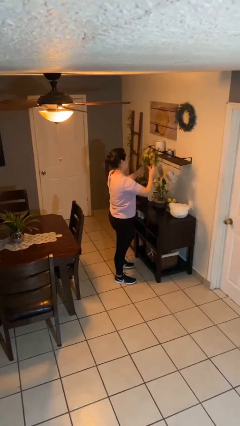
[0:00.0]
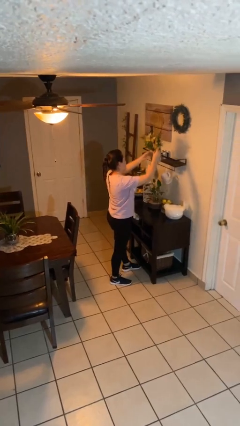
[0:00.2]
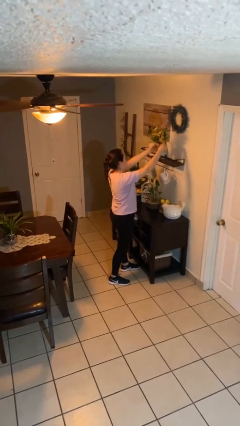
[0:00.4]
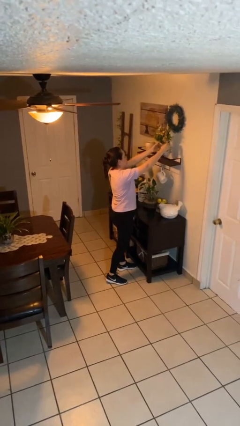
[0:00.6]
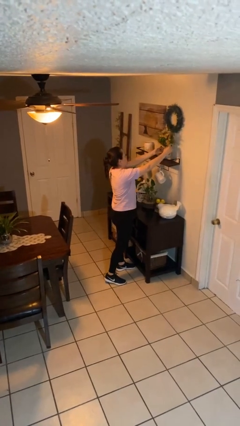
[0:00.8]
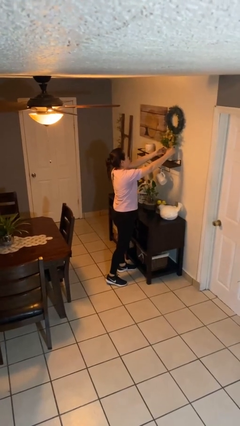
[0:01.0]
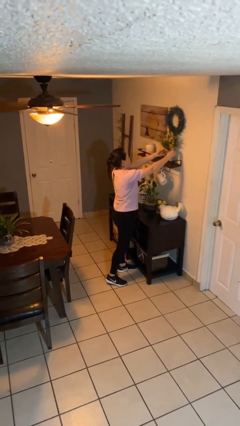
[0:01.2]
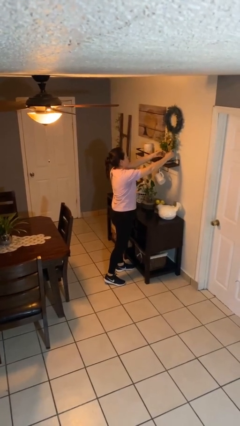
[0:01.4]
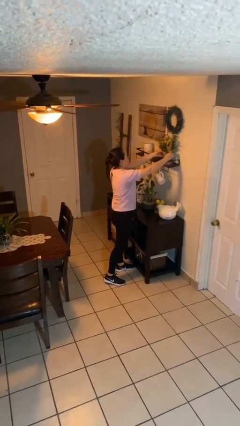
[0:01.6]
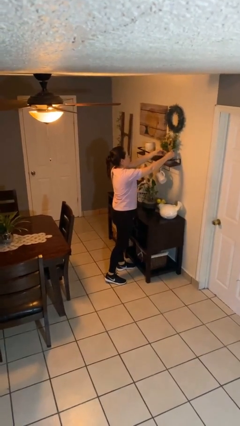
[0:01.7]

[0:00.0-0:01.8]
person puts down object on countertop

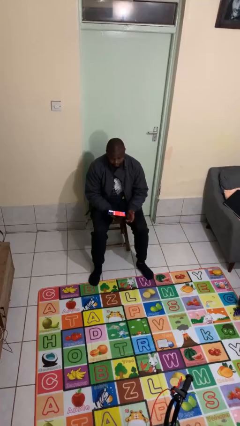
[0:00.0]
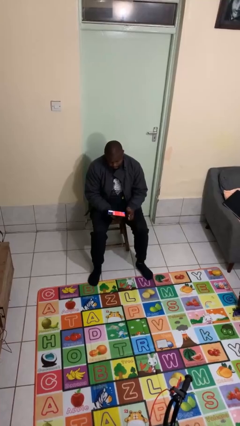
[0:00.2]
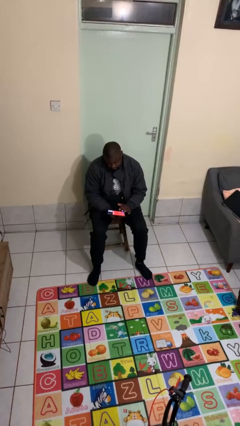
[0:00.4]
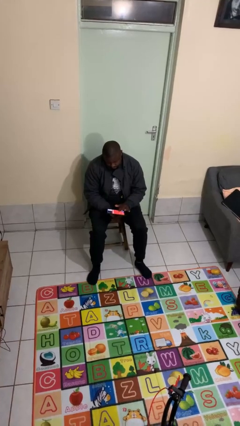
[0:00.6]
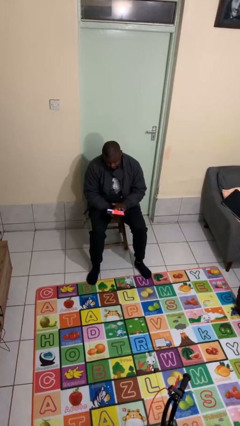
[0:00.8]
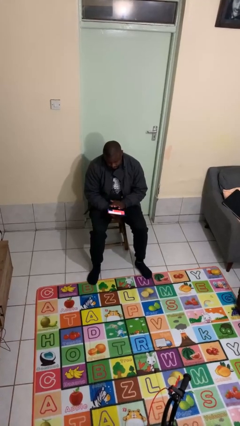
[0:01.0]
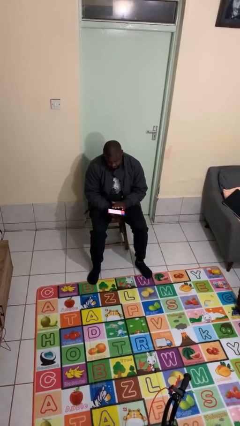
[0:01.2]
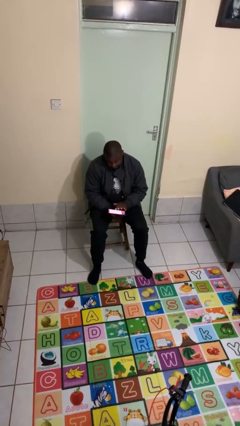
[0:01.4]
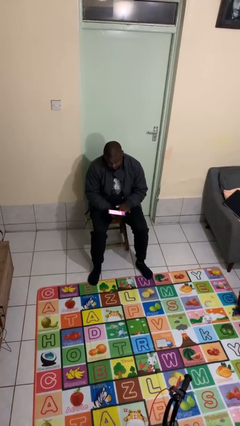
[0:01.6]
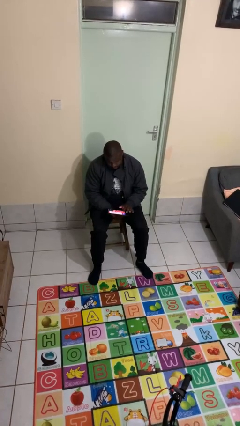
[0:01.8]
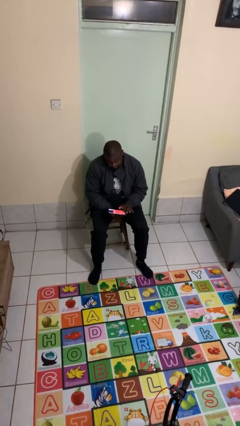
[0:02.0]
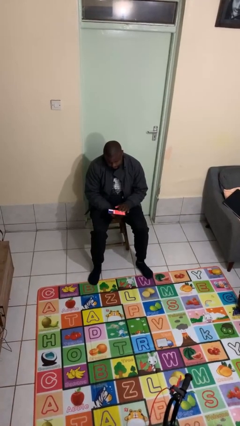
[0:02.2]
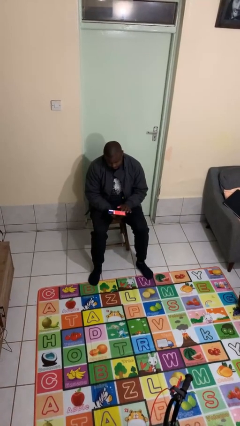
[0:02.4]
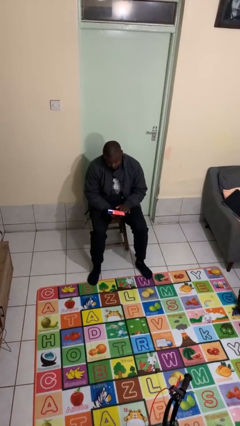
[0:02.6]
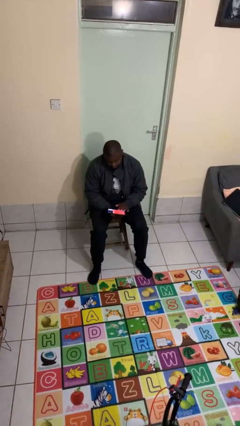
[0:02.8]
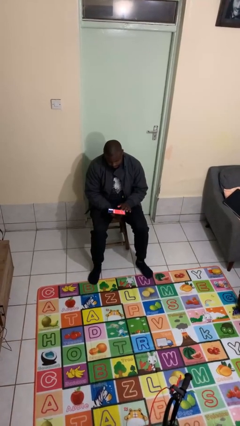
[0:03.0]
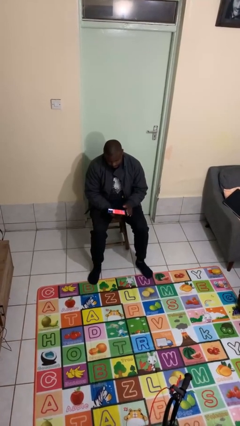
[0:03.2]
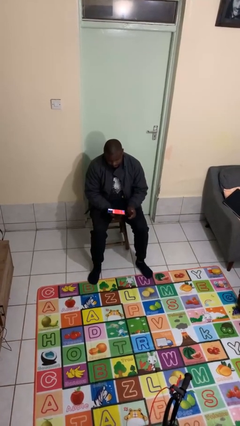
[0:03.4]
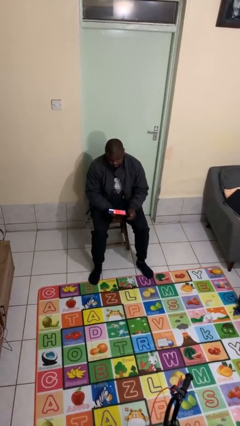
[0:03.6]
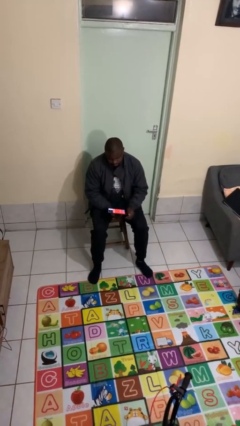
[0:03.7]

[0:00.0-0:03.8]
person interacts with tablet

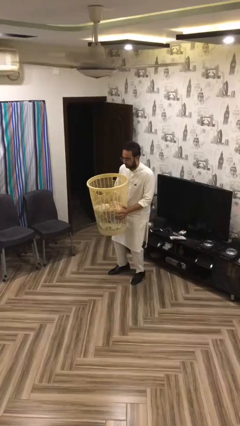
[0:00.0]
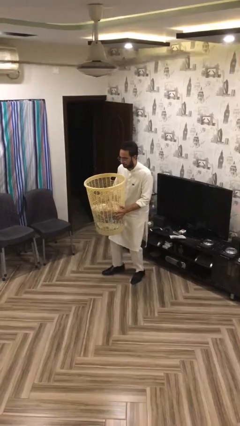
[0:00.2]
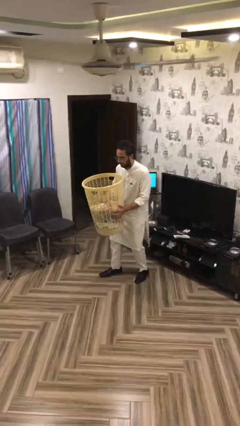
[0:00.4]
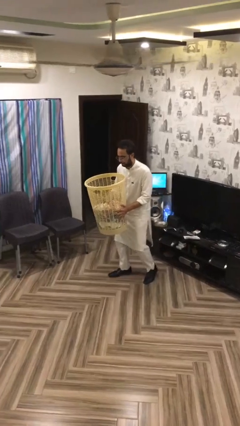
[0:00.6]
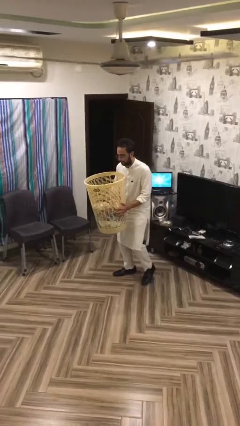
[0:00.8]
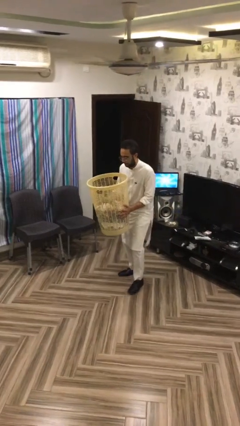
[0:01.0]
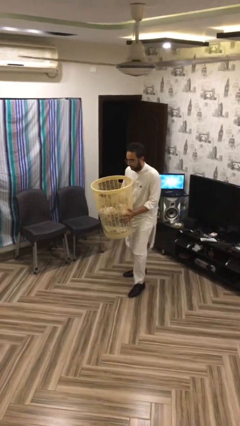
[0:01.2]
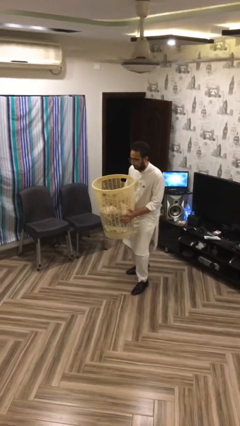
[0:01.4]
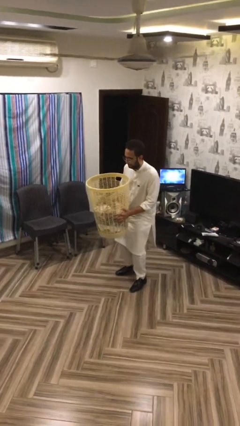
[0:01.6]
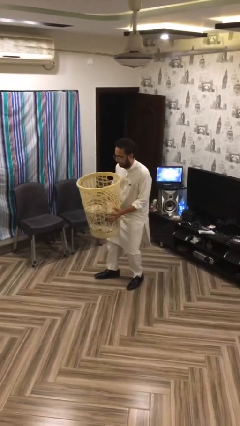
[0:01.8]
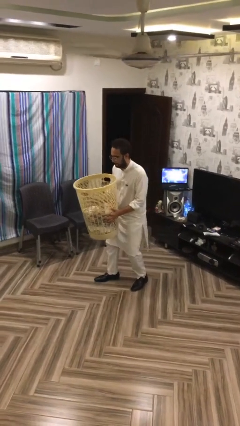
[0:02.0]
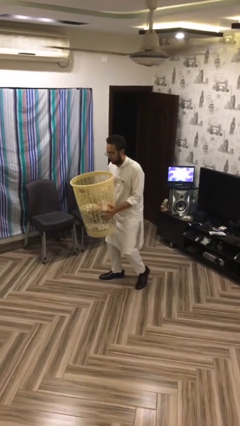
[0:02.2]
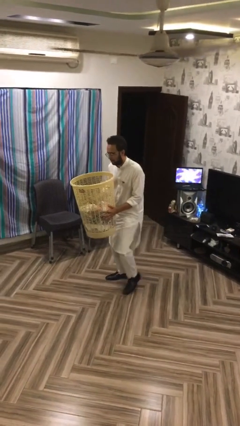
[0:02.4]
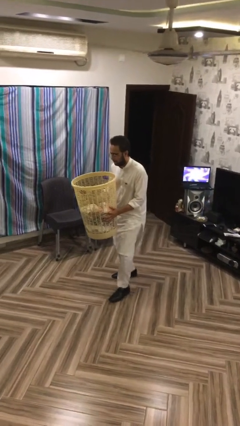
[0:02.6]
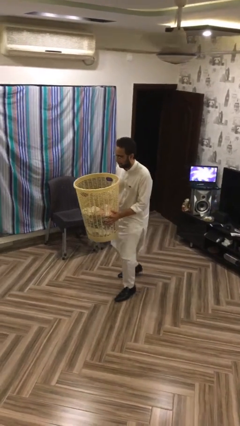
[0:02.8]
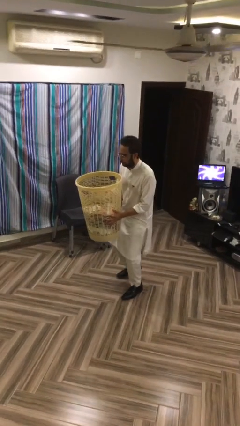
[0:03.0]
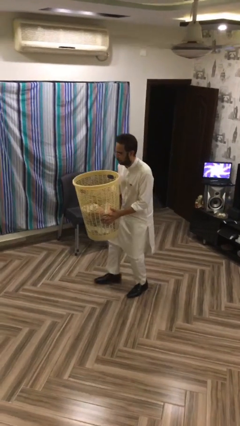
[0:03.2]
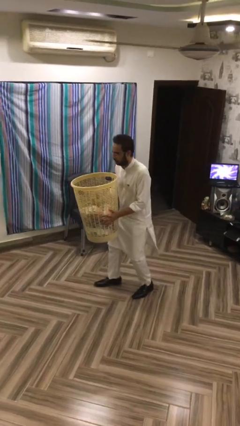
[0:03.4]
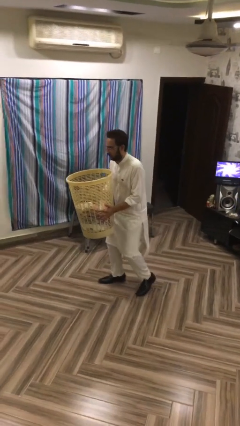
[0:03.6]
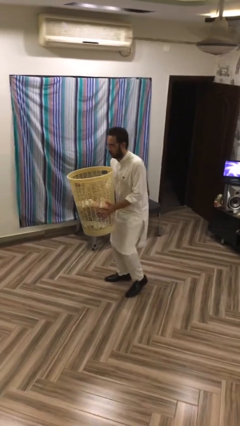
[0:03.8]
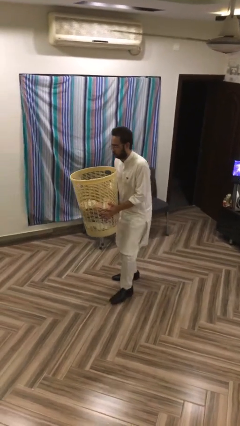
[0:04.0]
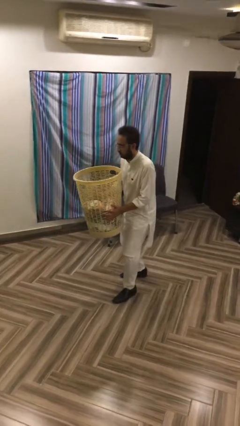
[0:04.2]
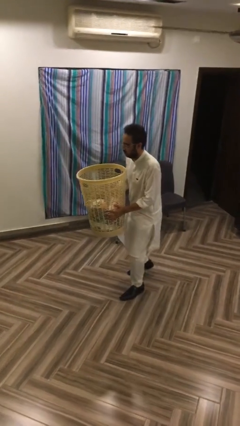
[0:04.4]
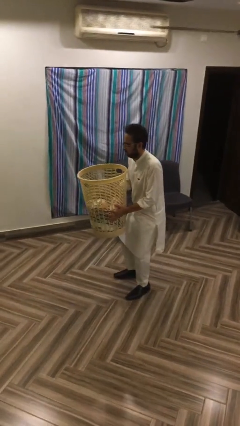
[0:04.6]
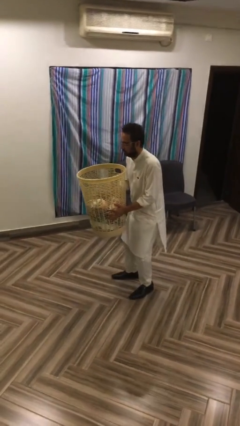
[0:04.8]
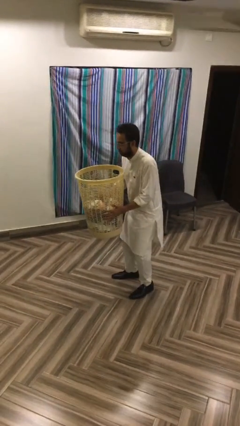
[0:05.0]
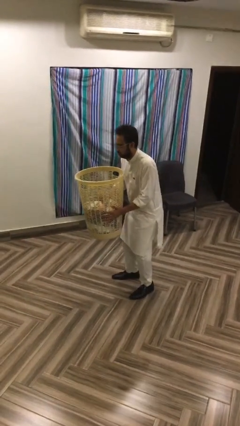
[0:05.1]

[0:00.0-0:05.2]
person carries heavy object

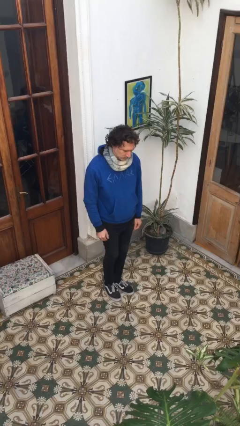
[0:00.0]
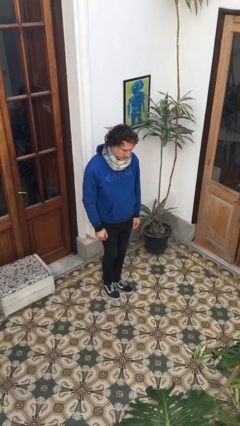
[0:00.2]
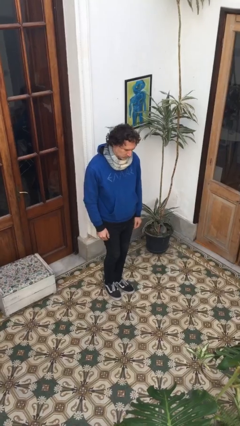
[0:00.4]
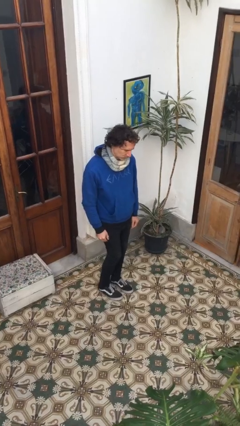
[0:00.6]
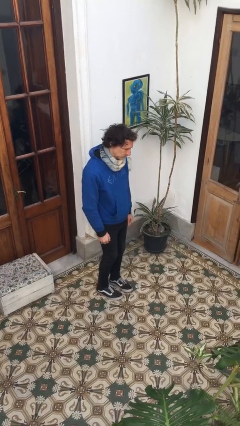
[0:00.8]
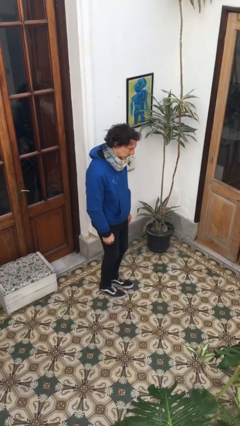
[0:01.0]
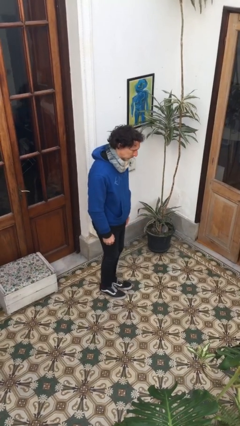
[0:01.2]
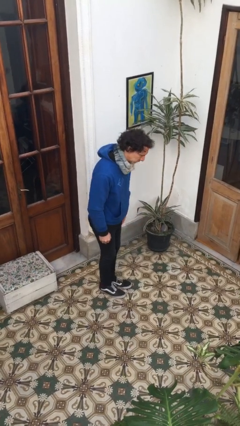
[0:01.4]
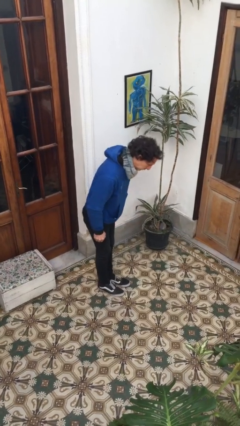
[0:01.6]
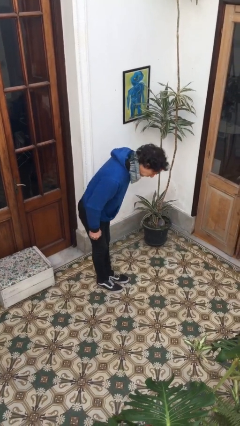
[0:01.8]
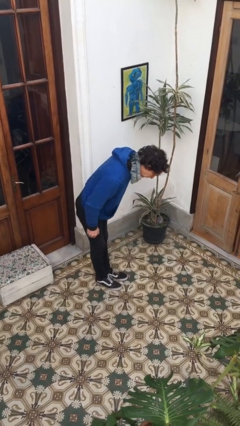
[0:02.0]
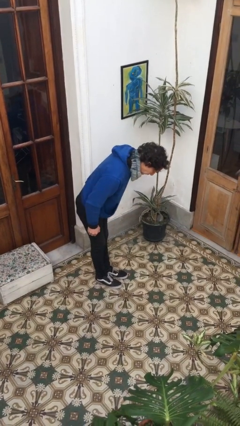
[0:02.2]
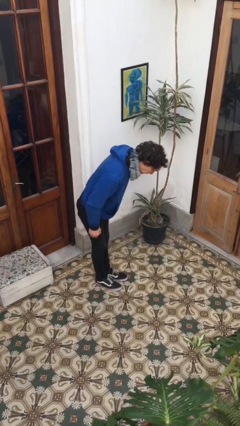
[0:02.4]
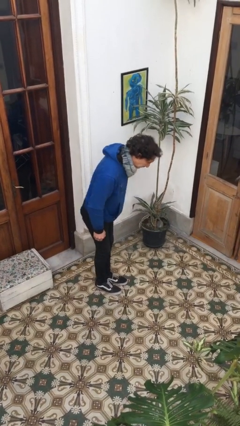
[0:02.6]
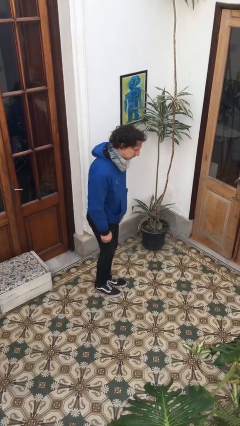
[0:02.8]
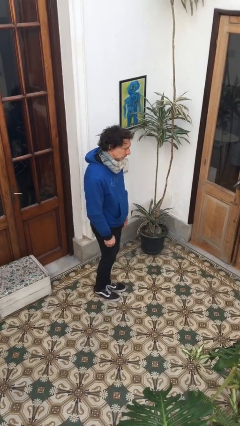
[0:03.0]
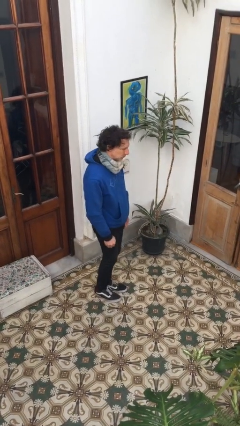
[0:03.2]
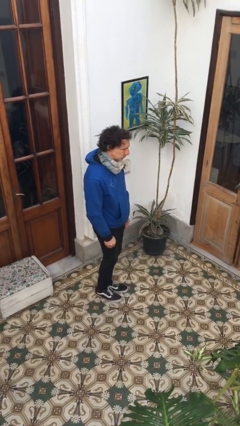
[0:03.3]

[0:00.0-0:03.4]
person bows

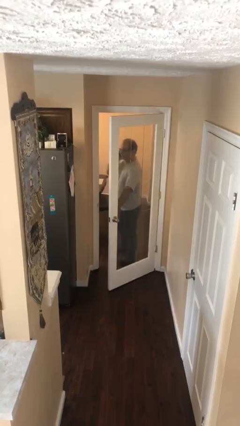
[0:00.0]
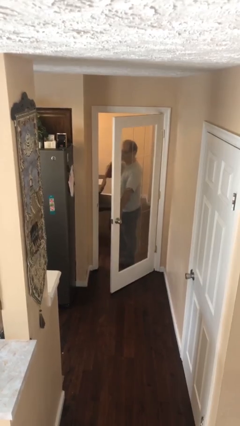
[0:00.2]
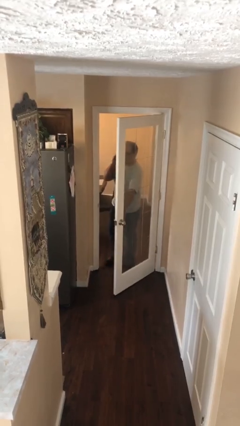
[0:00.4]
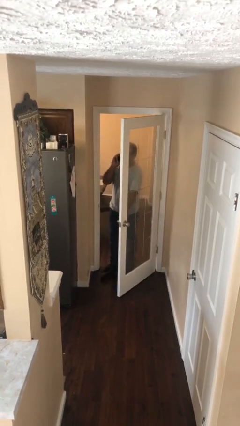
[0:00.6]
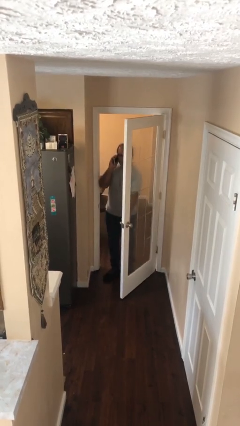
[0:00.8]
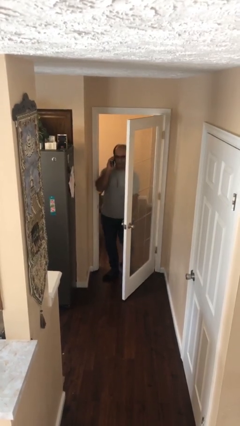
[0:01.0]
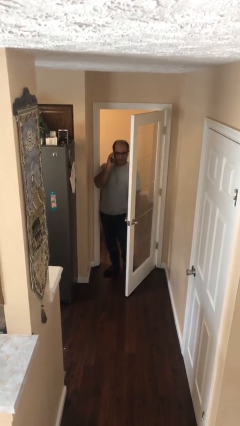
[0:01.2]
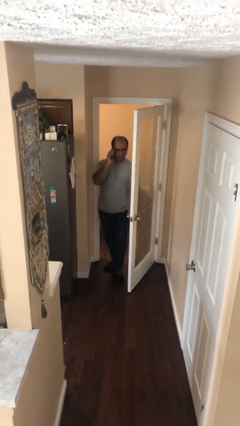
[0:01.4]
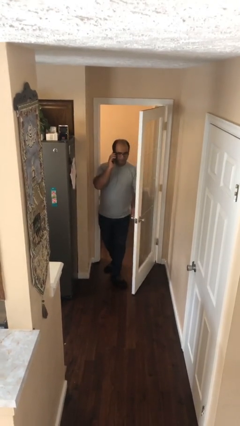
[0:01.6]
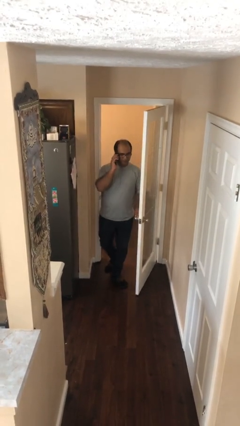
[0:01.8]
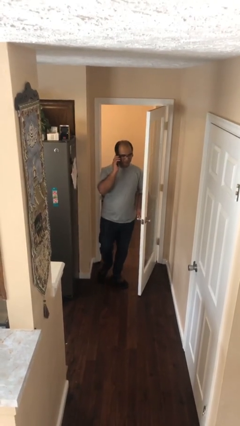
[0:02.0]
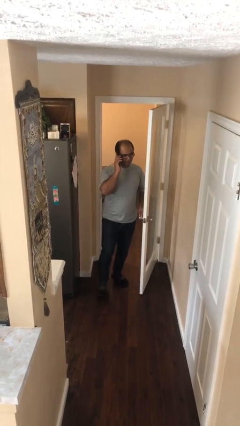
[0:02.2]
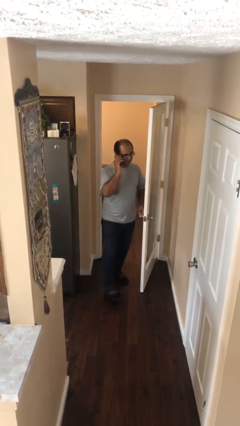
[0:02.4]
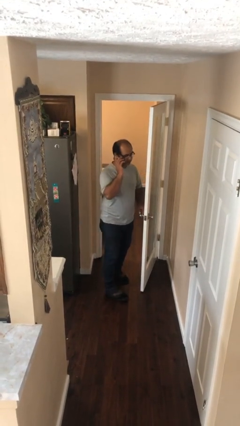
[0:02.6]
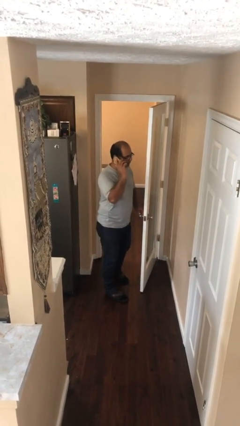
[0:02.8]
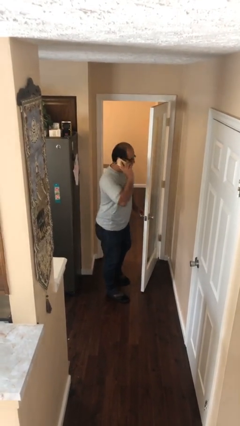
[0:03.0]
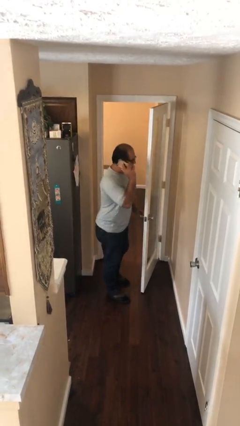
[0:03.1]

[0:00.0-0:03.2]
person enters scene through structure

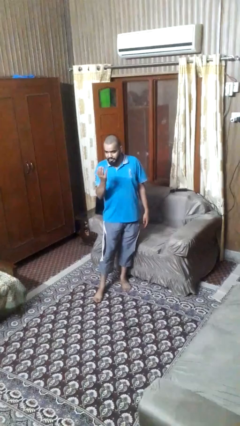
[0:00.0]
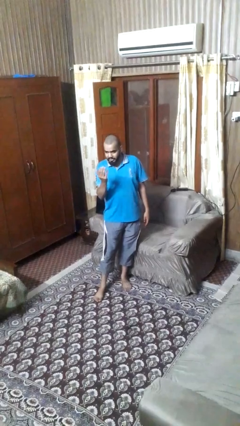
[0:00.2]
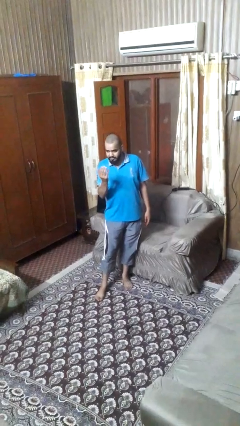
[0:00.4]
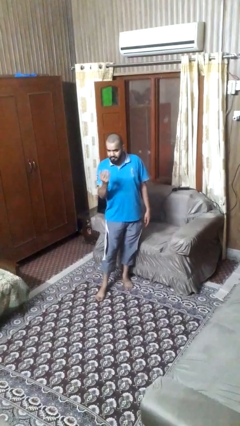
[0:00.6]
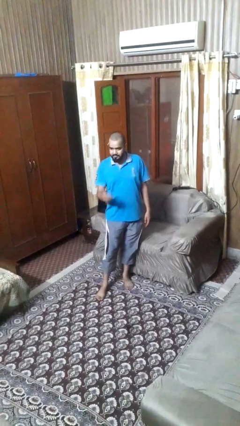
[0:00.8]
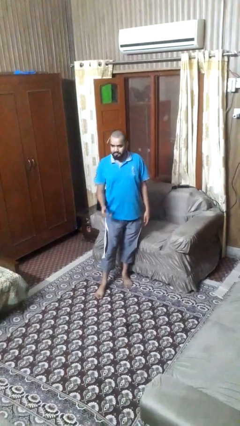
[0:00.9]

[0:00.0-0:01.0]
person gestures come here
